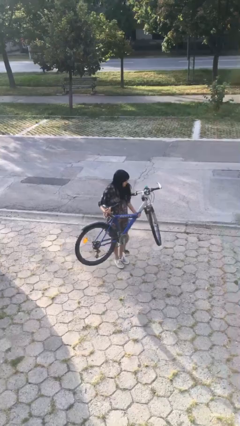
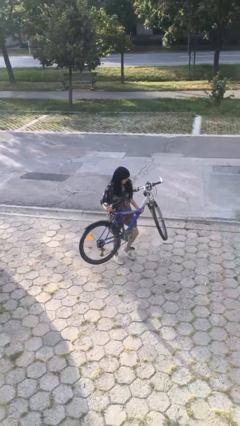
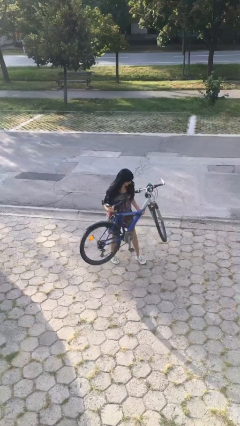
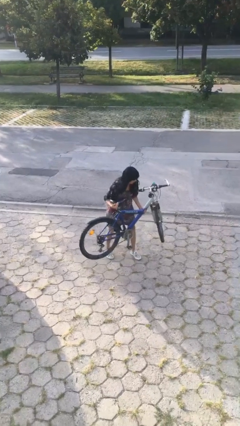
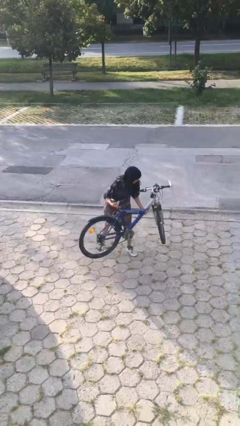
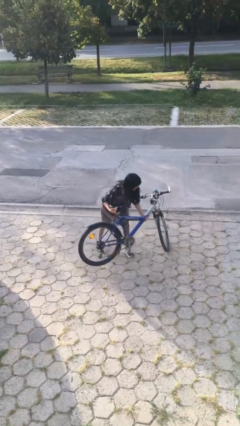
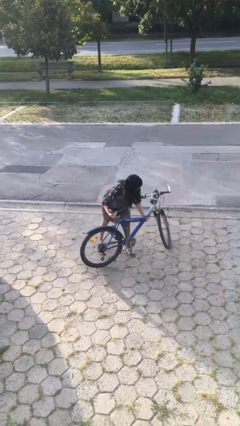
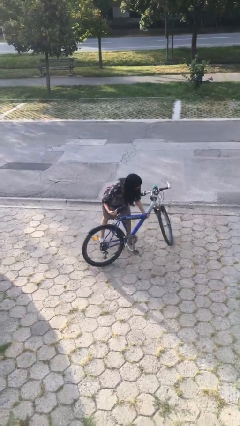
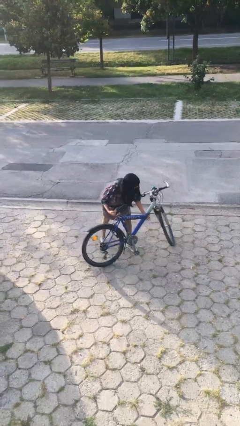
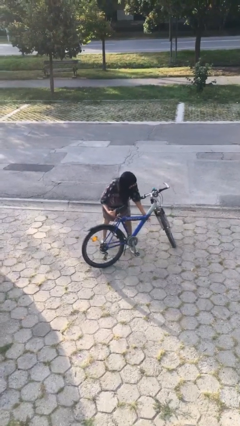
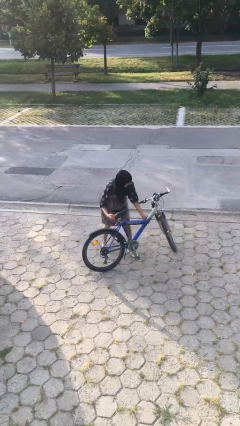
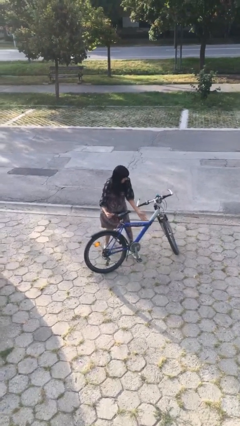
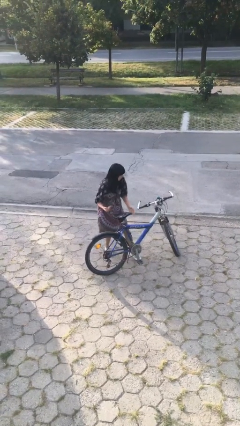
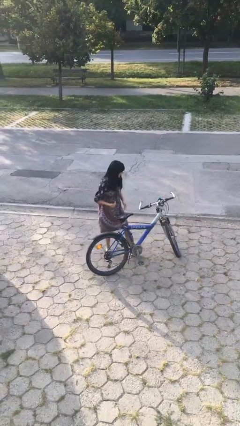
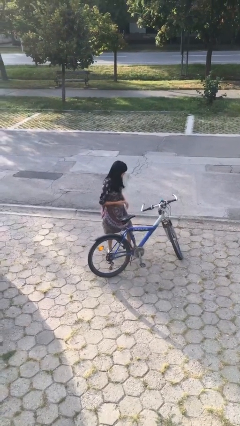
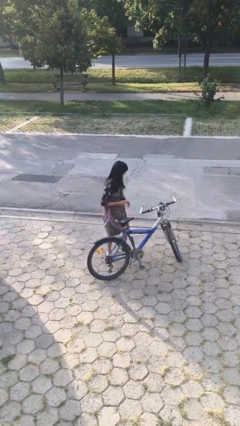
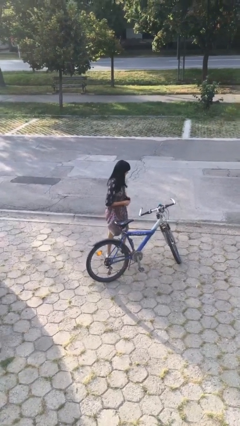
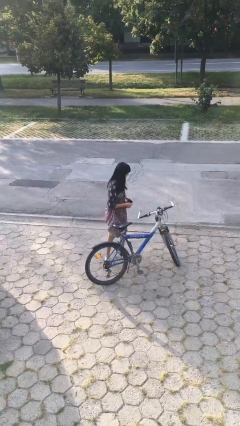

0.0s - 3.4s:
person puts down object on floor

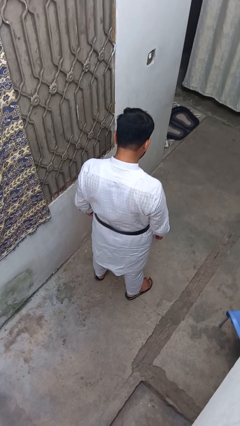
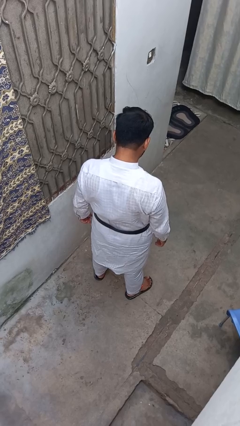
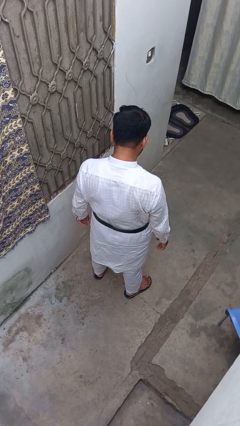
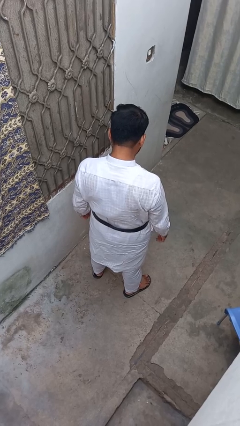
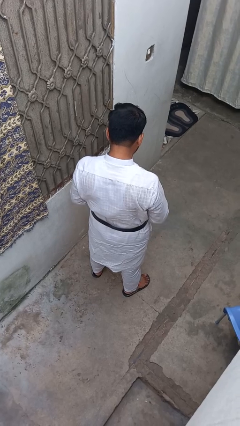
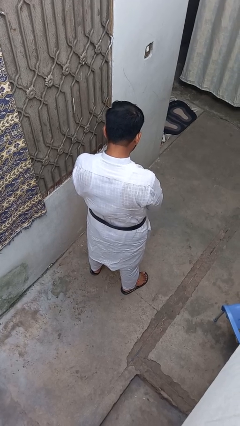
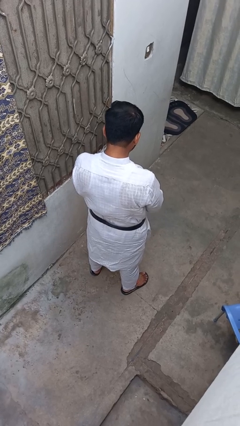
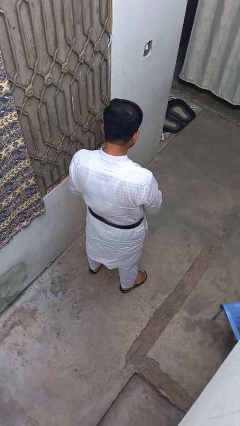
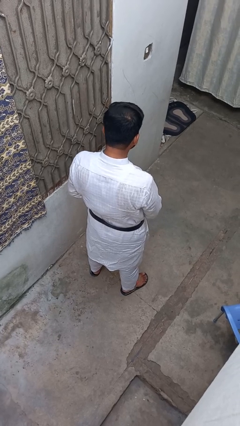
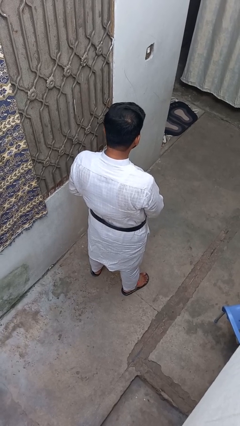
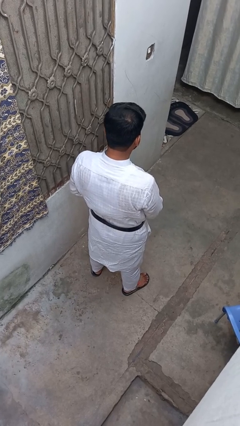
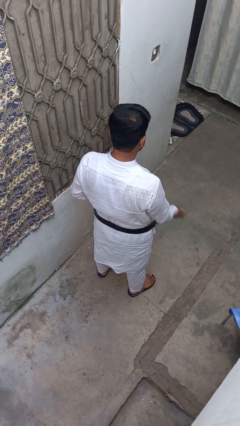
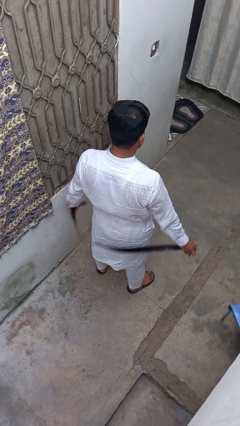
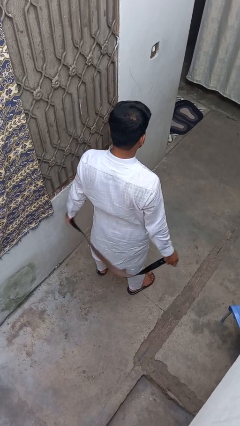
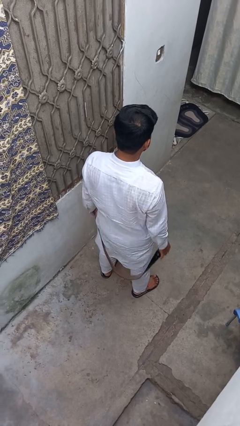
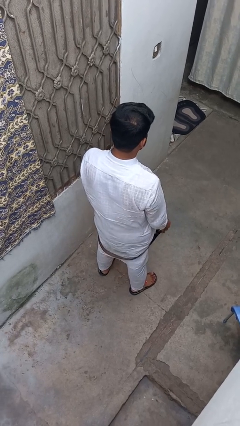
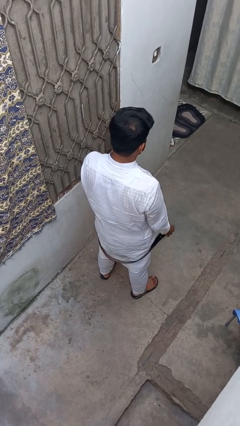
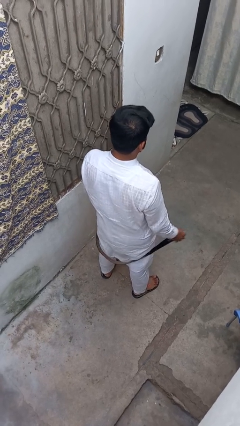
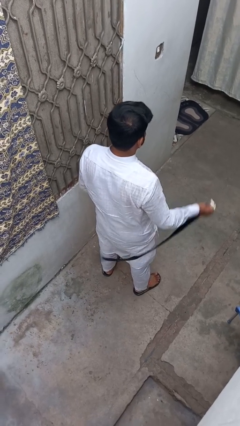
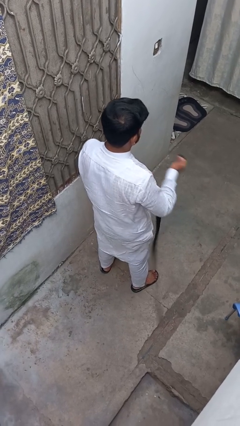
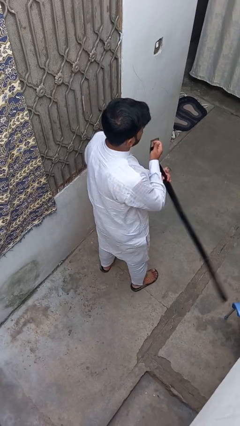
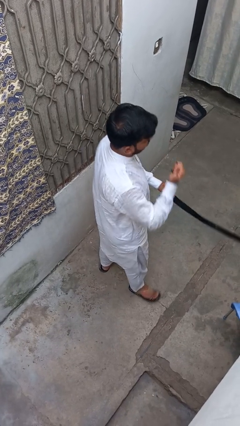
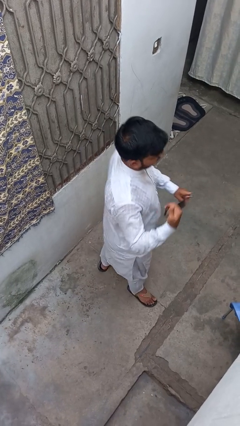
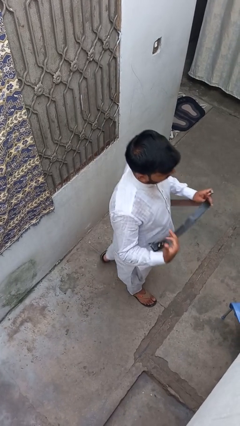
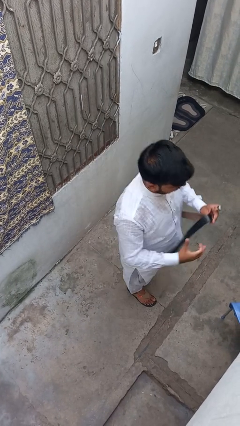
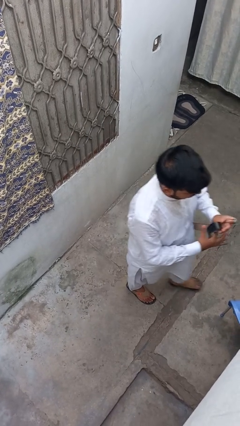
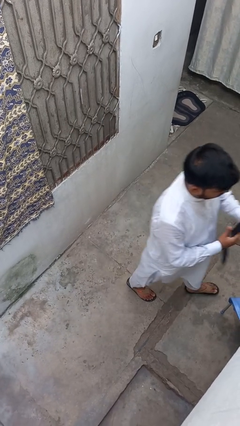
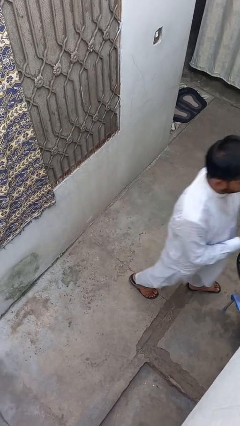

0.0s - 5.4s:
person takes off belt

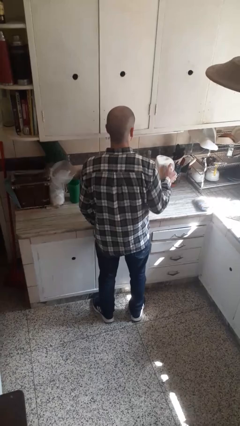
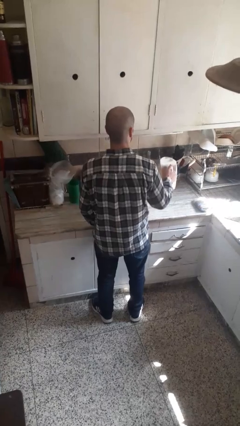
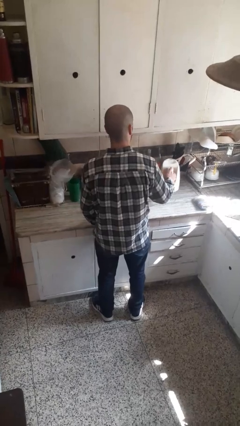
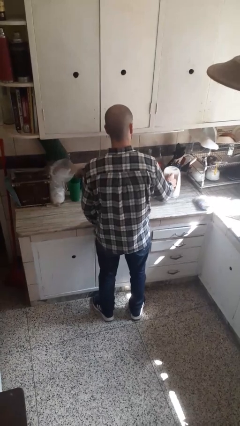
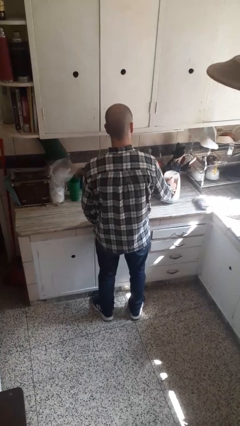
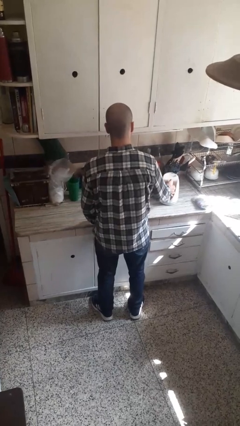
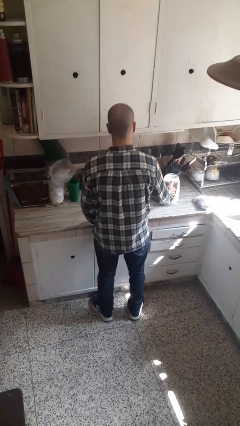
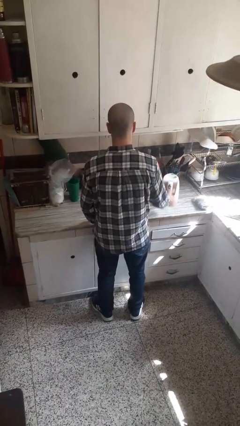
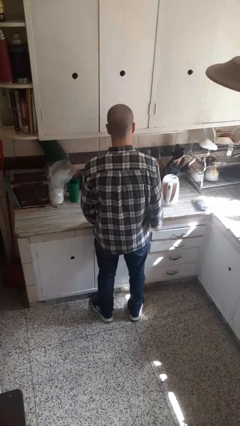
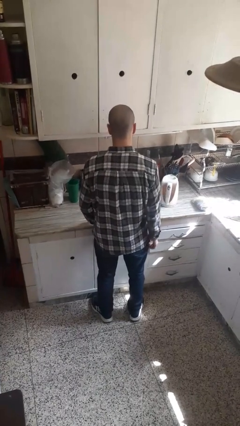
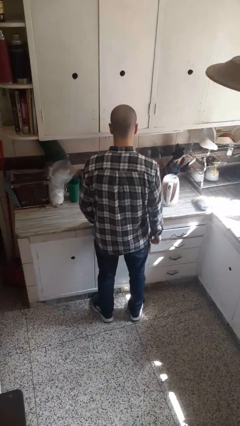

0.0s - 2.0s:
person puts down object on countertop

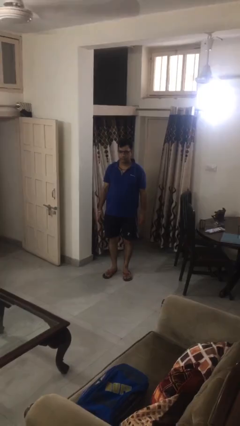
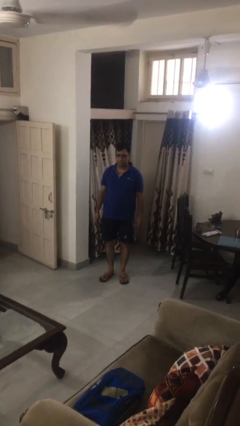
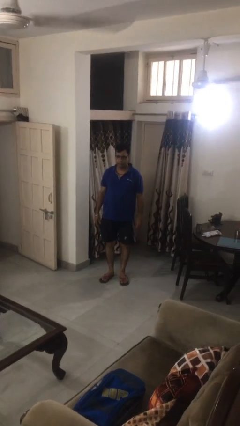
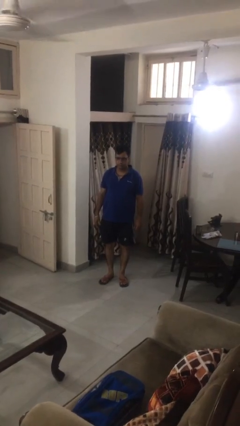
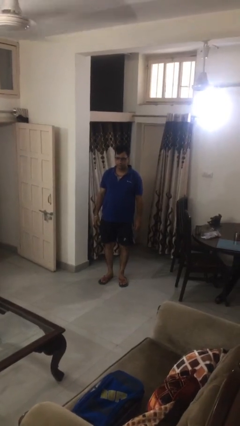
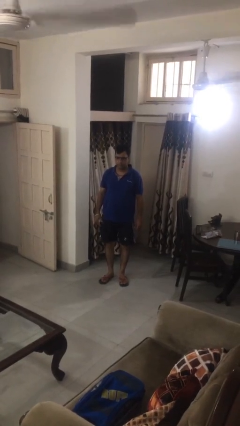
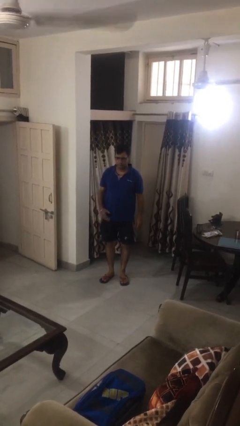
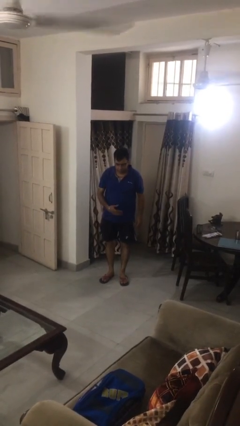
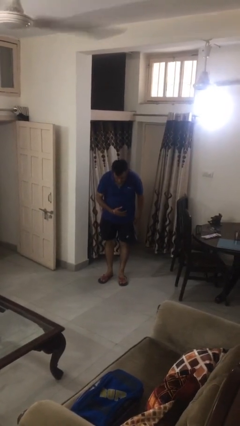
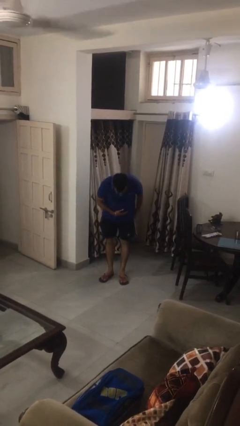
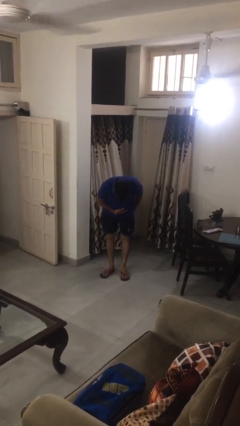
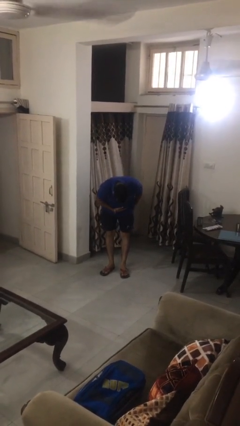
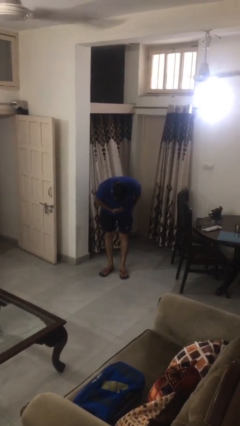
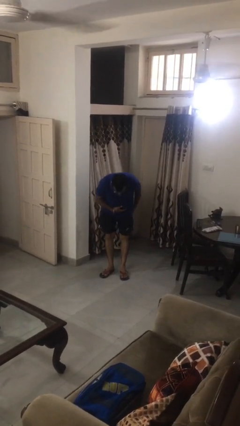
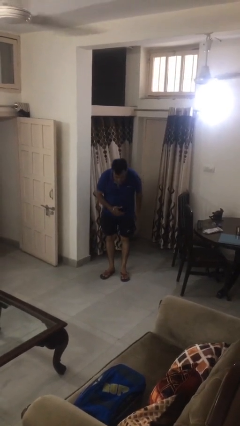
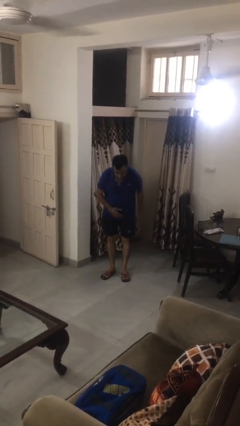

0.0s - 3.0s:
person bows

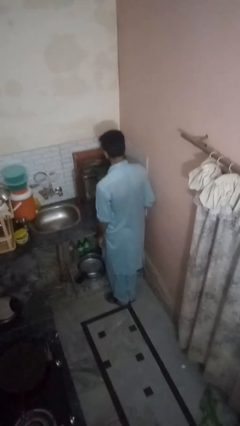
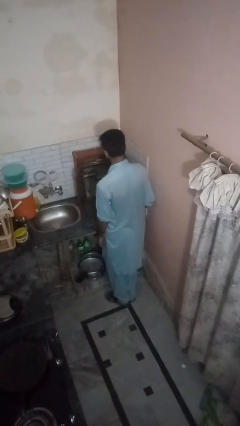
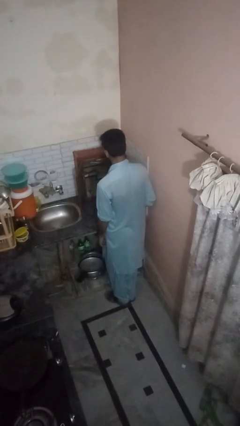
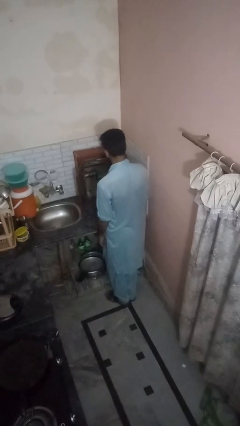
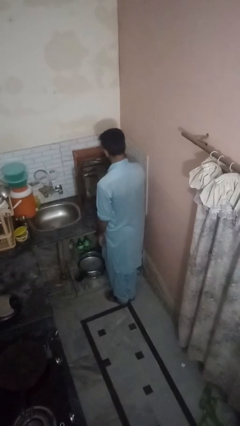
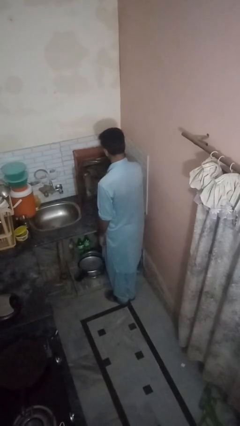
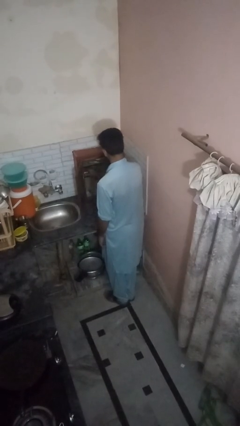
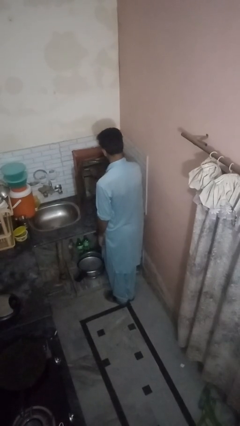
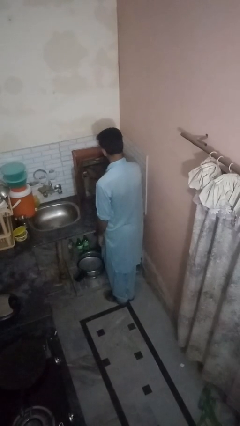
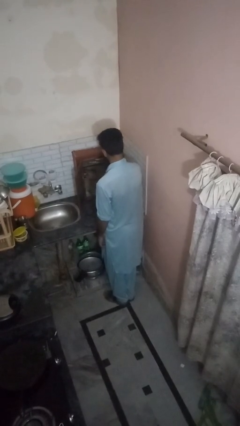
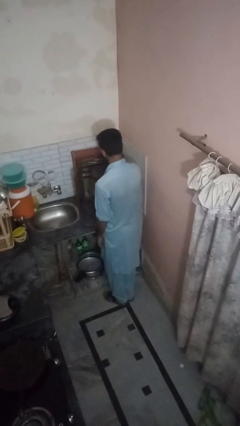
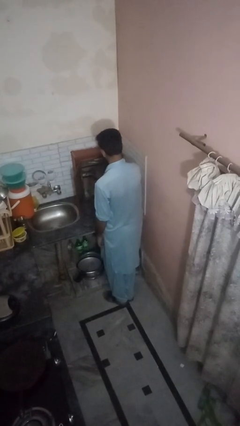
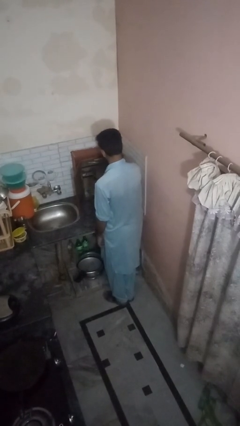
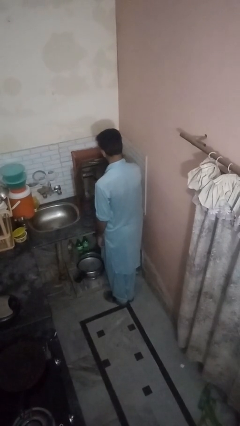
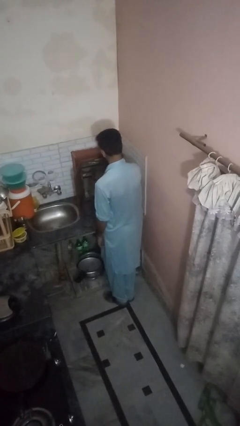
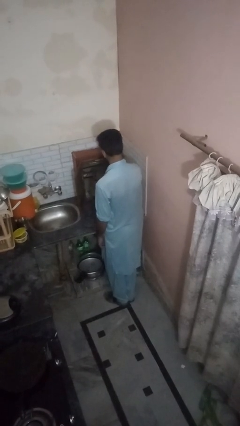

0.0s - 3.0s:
person searches in kitchen drawer

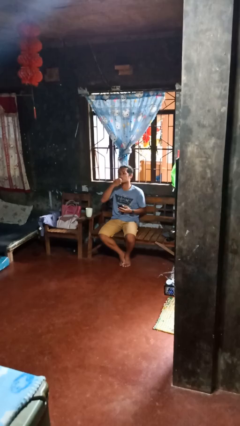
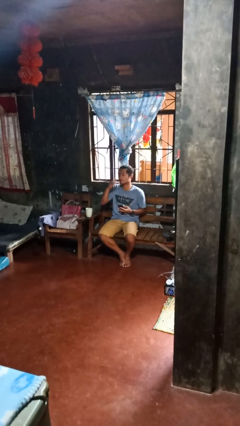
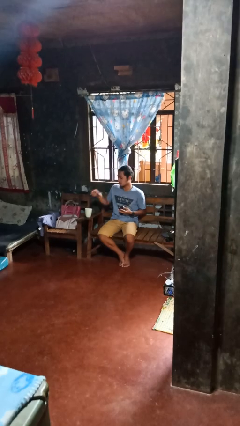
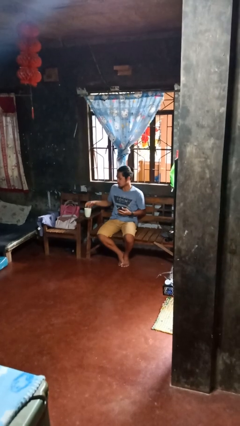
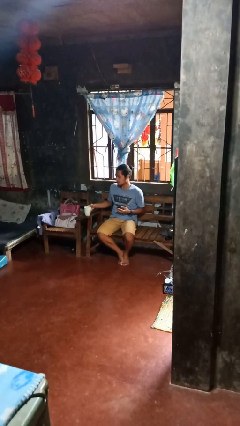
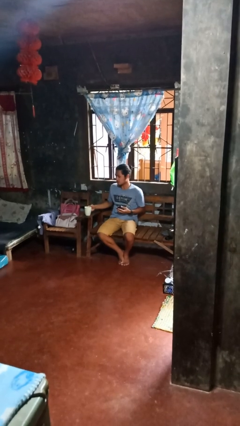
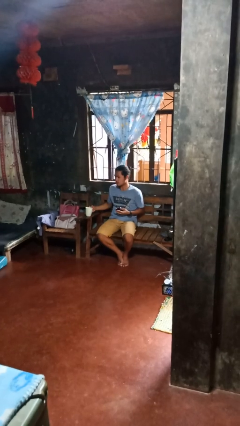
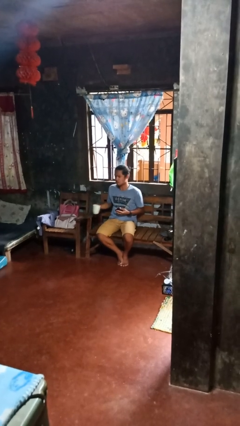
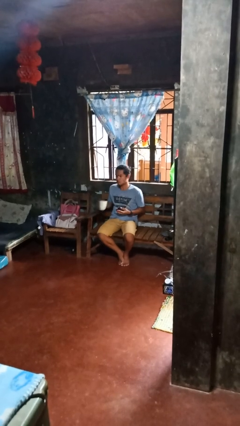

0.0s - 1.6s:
person takes medicine pills
